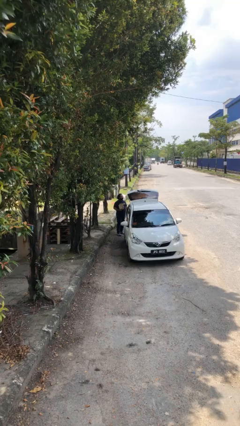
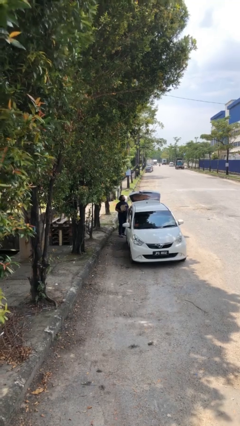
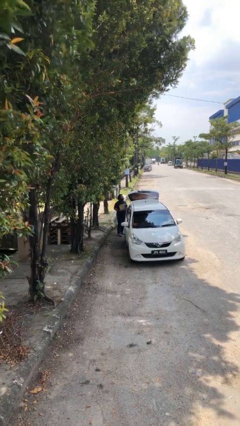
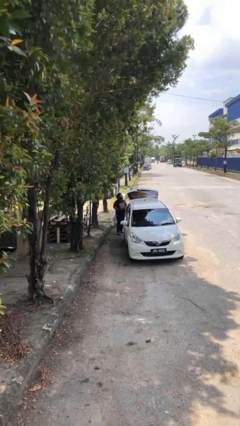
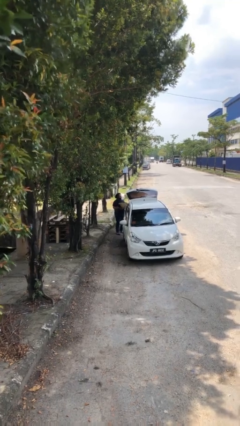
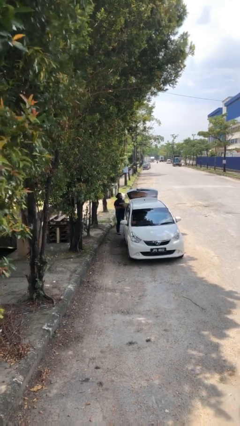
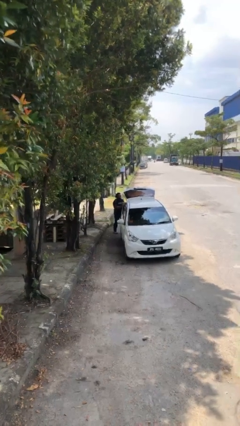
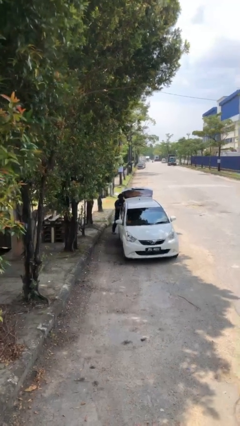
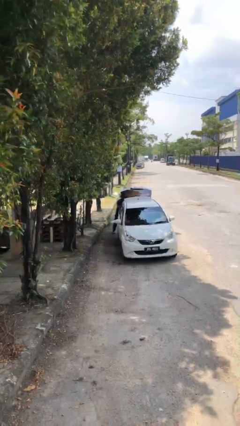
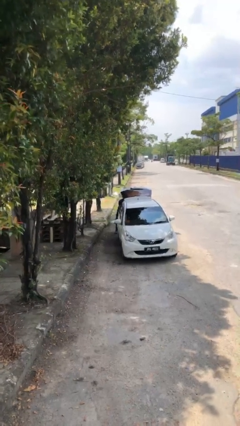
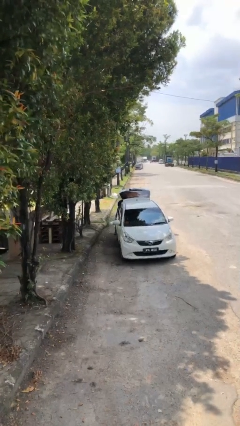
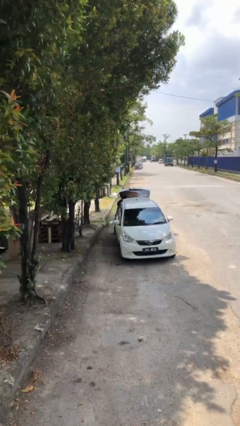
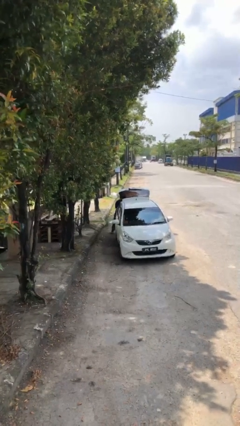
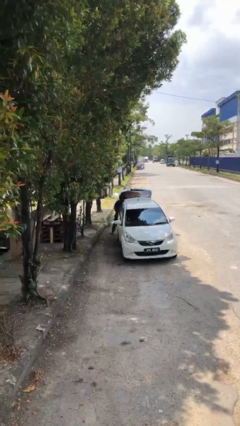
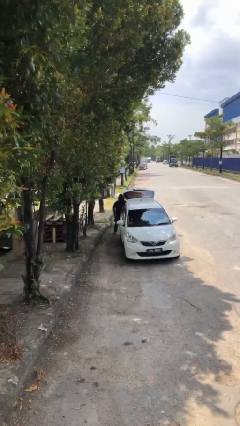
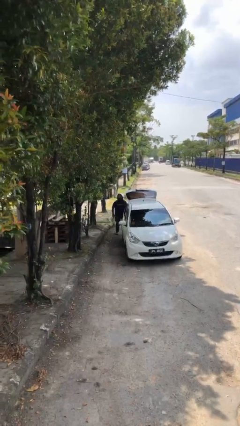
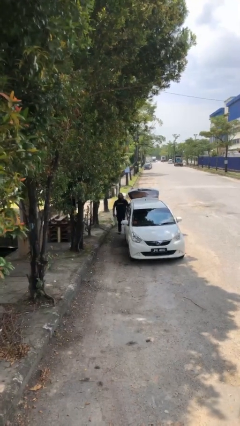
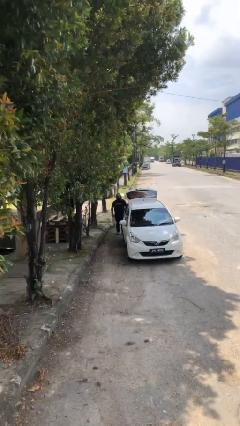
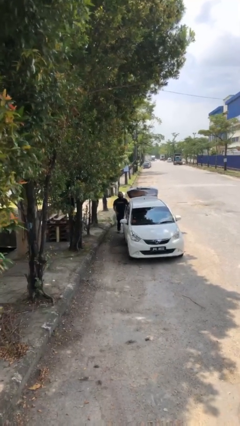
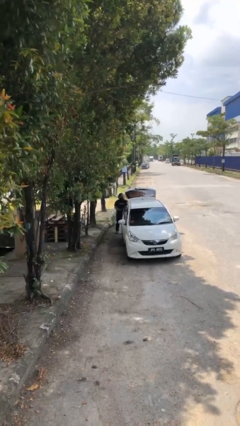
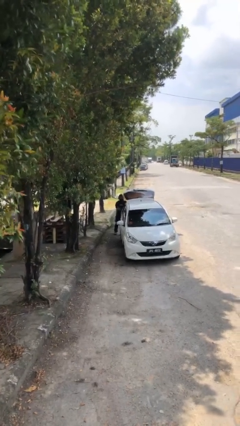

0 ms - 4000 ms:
person loads car

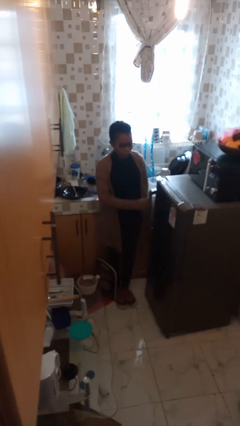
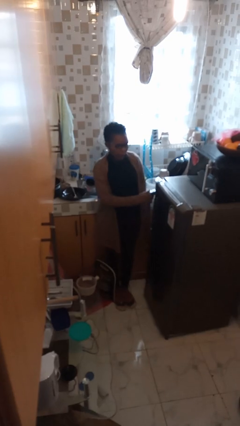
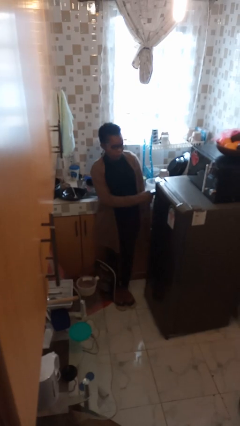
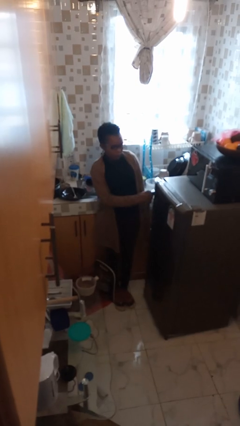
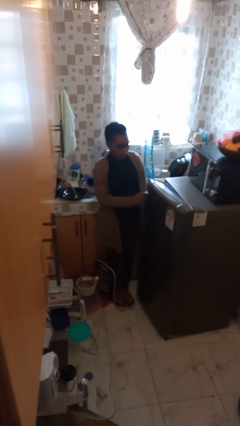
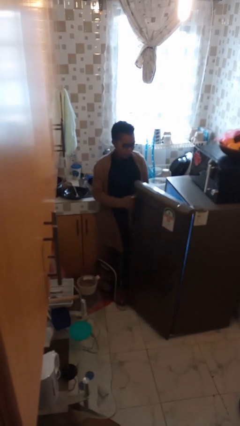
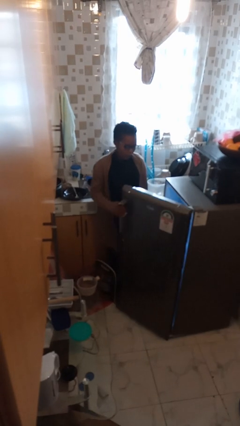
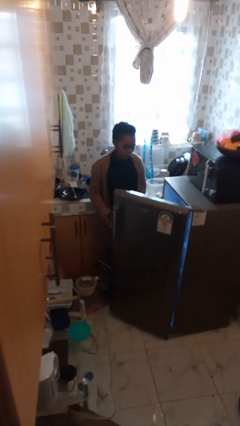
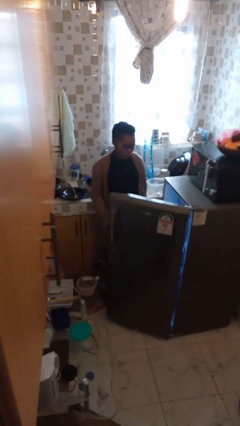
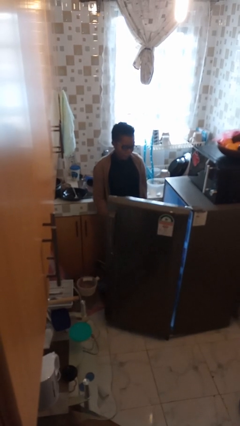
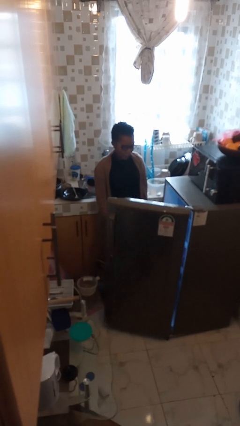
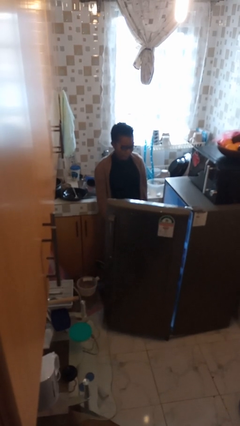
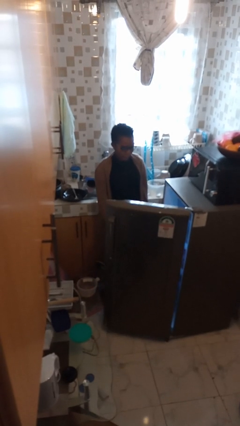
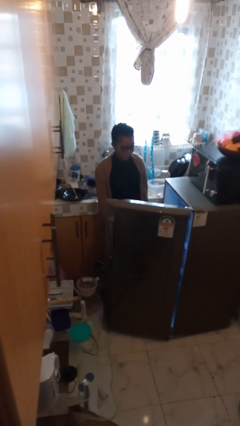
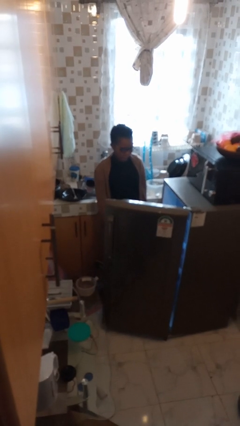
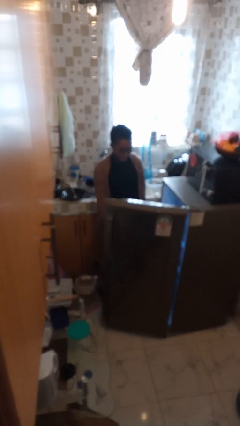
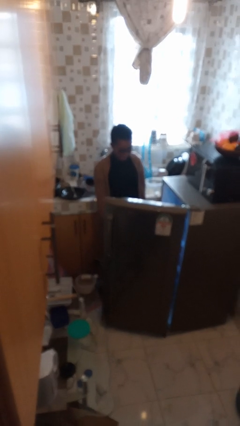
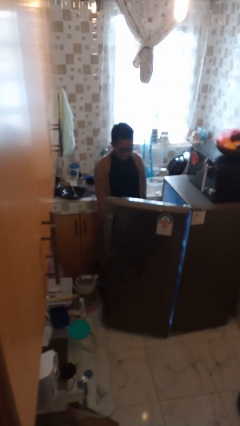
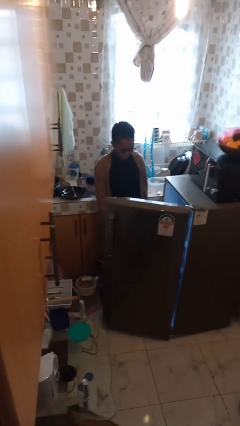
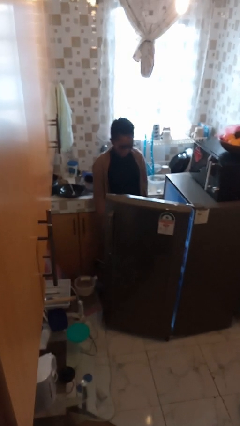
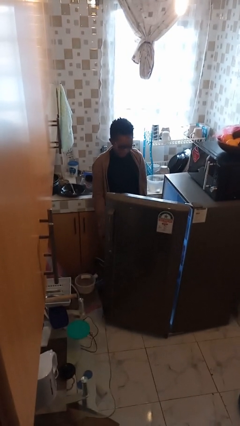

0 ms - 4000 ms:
person opens refrigerator

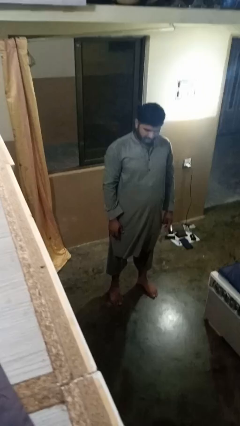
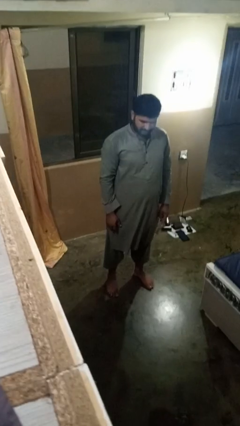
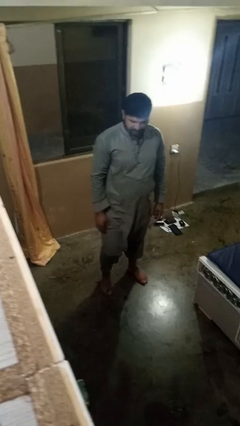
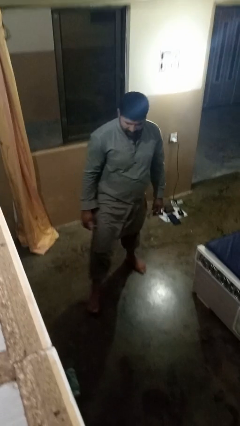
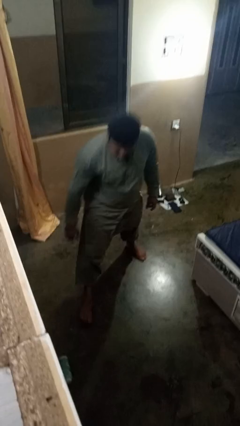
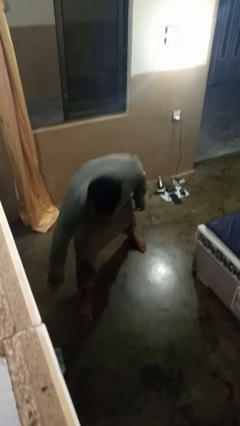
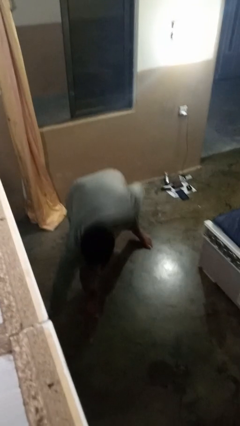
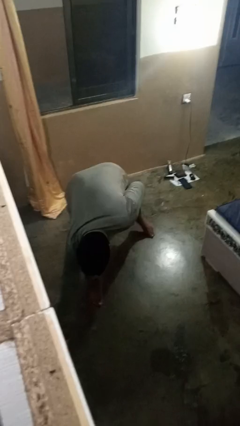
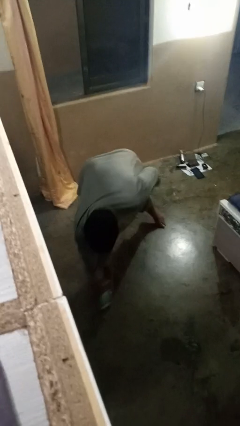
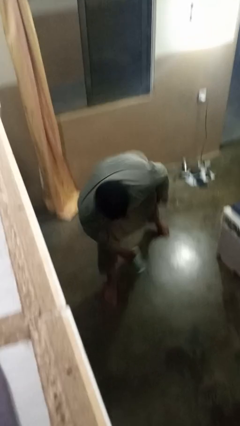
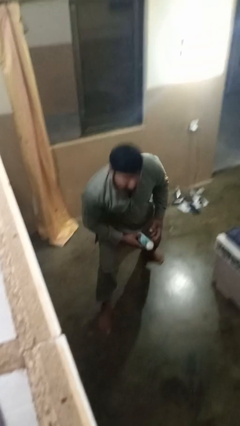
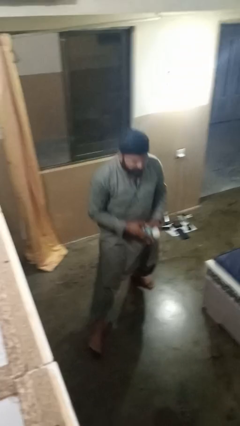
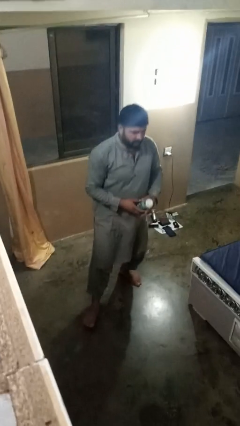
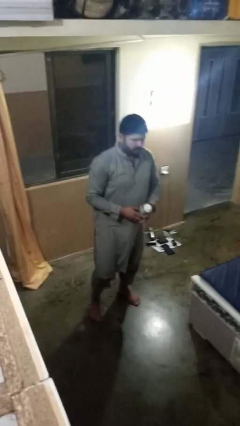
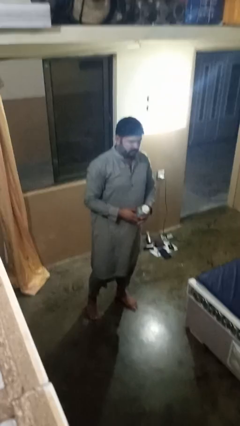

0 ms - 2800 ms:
person picks up object from floor

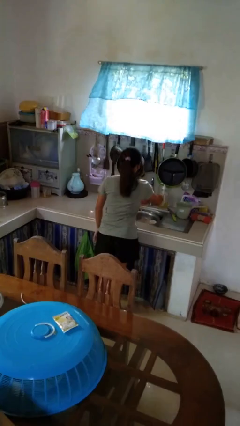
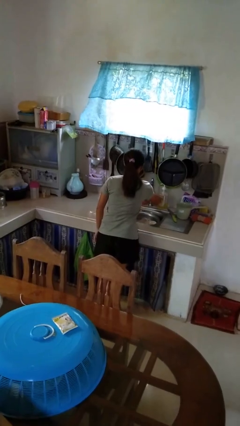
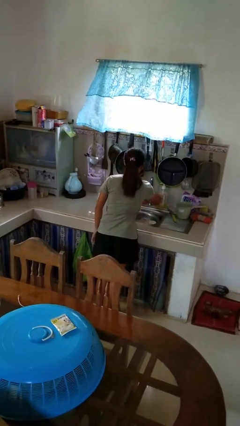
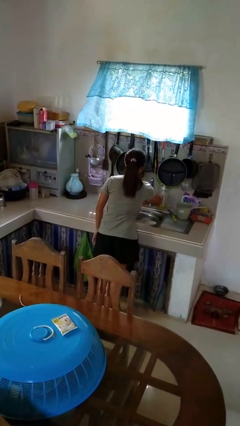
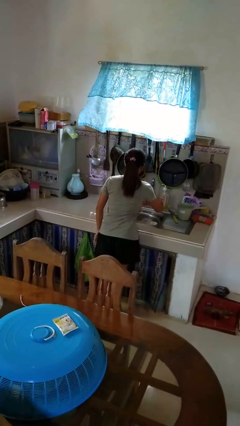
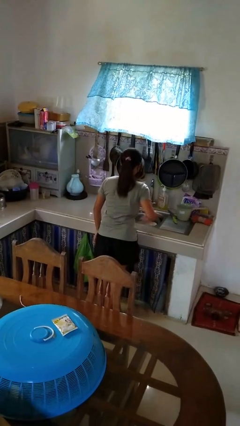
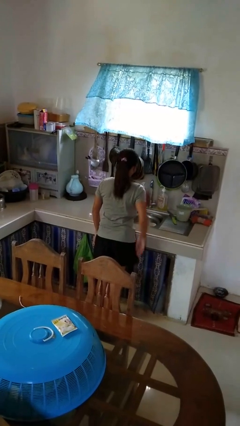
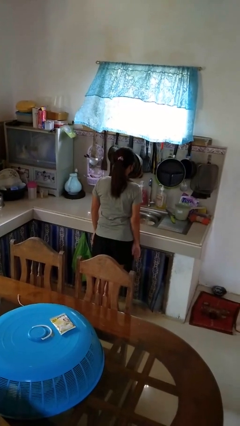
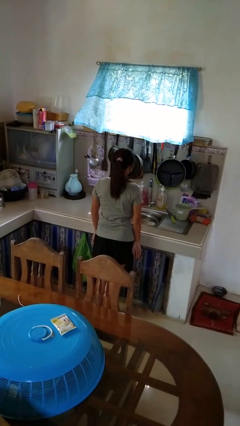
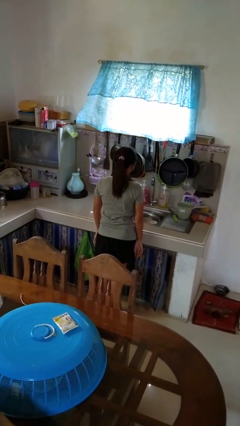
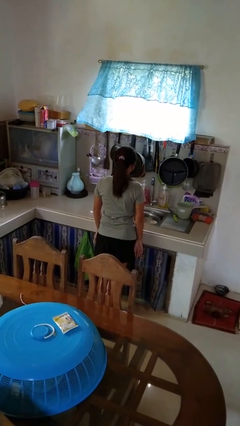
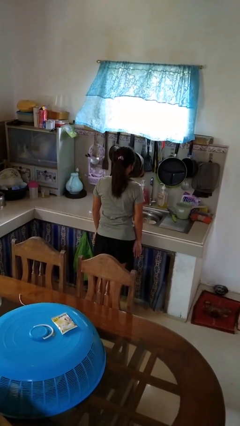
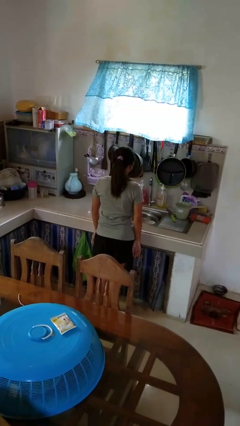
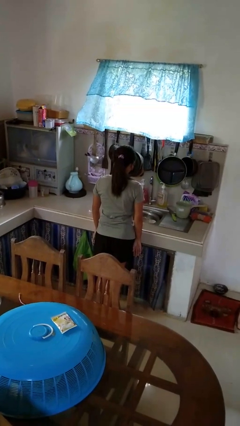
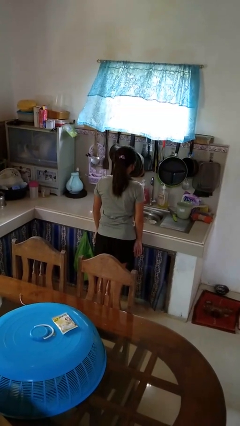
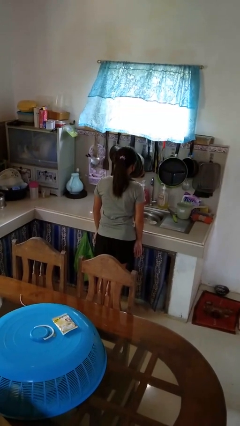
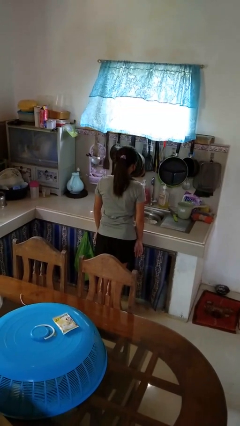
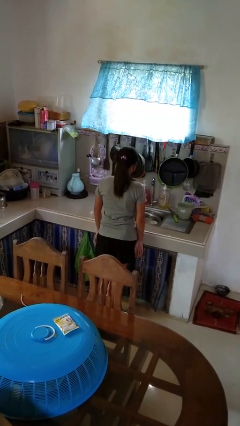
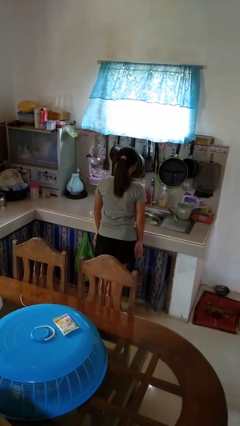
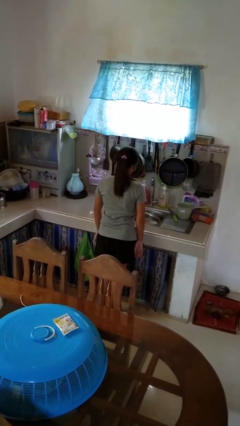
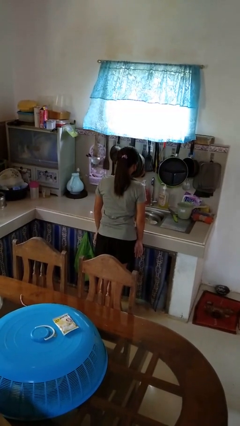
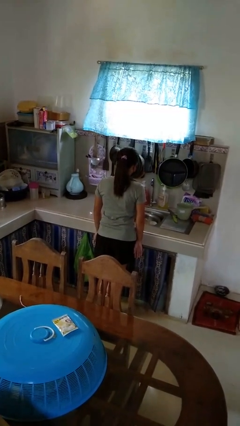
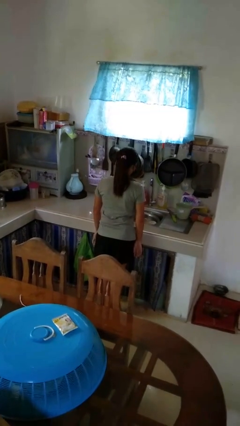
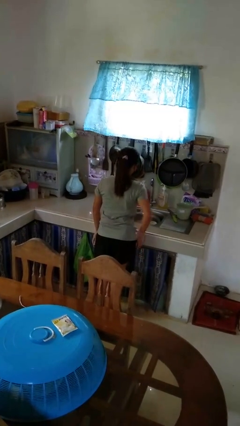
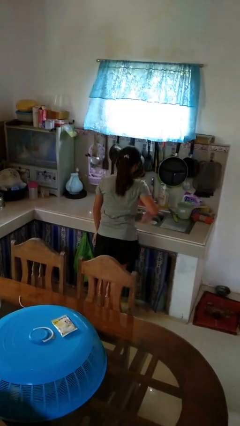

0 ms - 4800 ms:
person turns on faucet

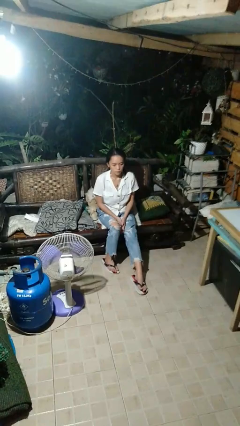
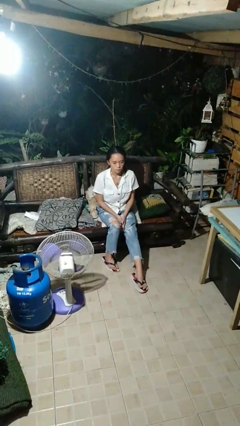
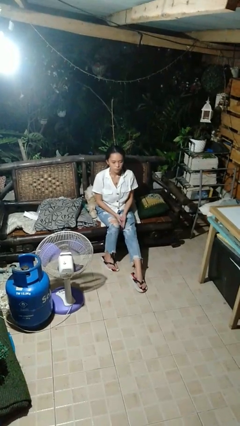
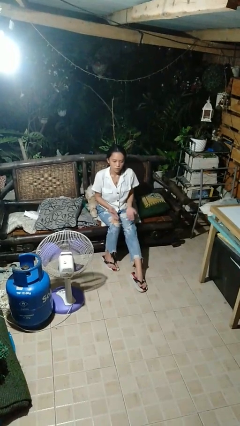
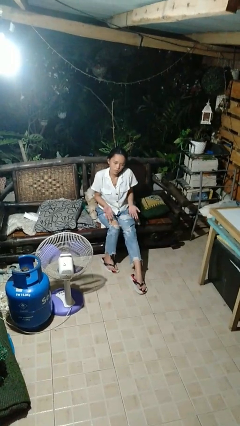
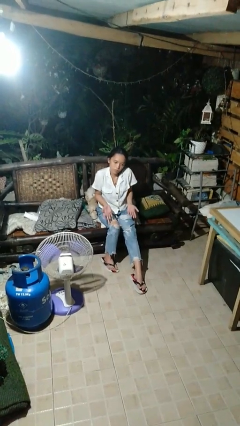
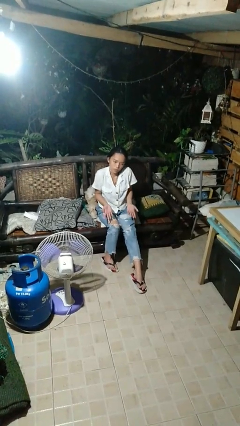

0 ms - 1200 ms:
person shrugs

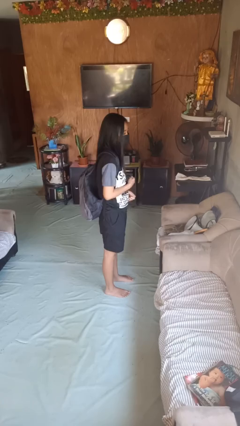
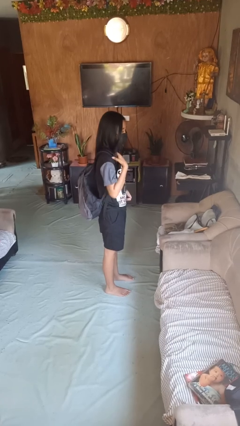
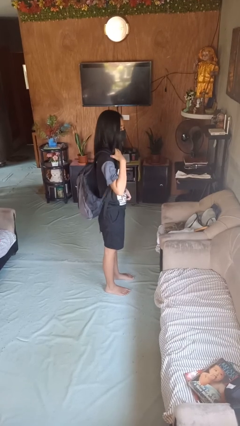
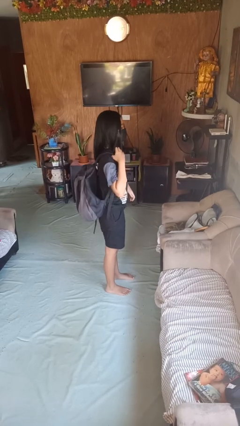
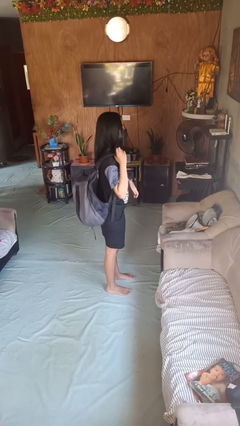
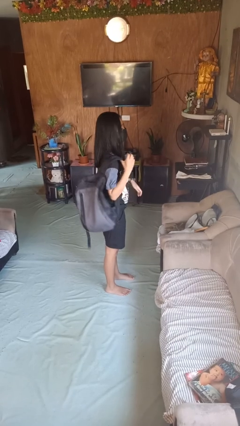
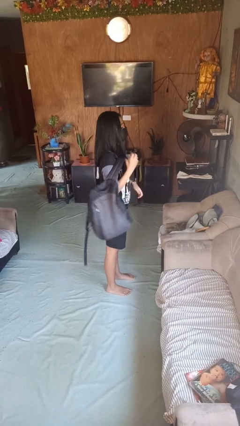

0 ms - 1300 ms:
person takes off backpack
